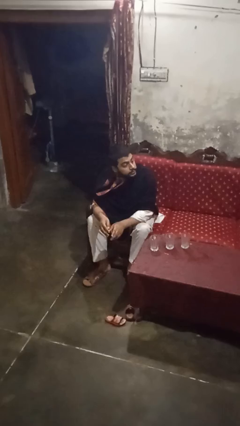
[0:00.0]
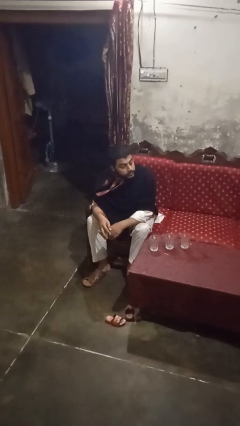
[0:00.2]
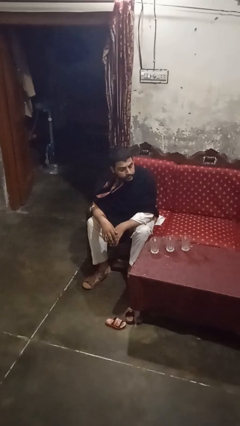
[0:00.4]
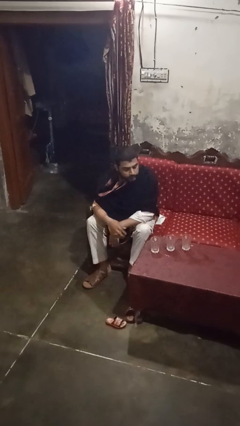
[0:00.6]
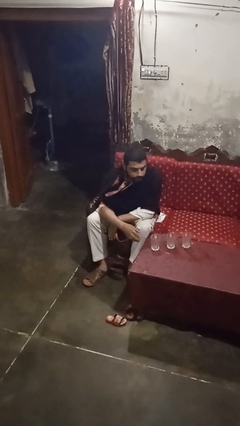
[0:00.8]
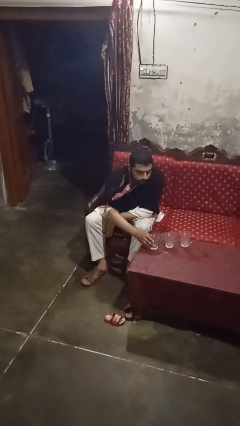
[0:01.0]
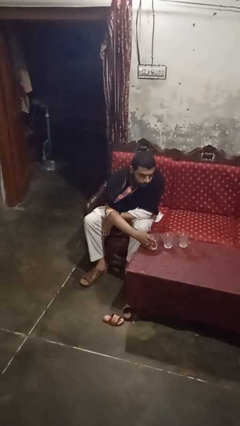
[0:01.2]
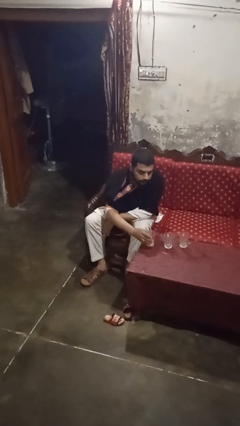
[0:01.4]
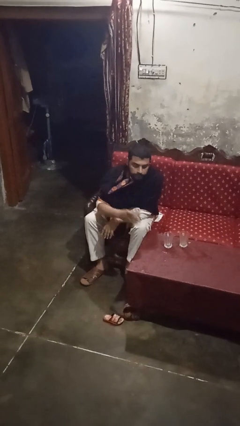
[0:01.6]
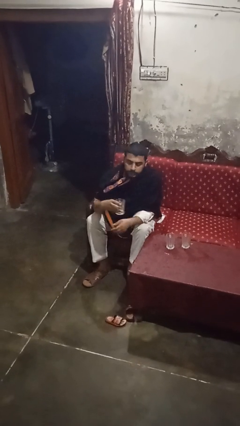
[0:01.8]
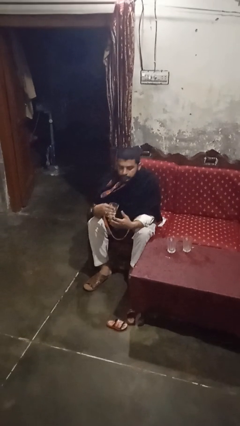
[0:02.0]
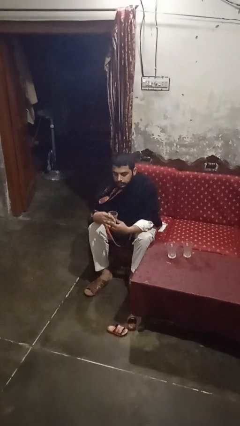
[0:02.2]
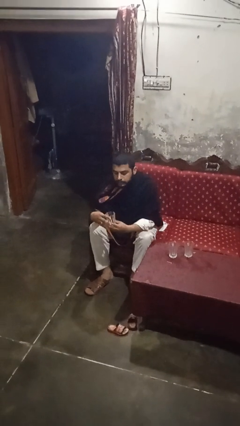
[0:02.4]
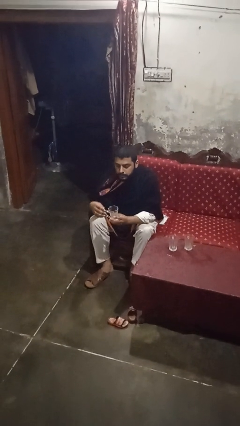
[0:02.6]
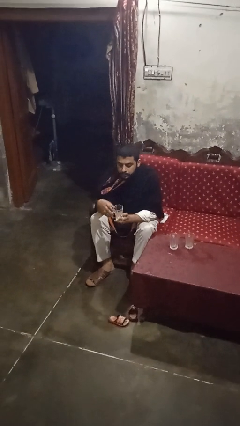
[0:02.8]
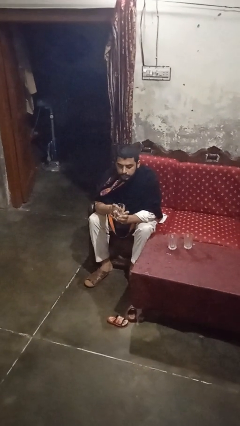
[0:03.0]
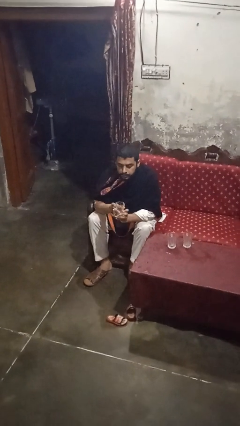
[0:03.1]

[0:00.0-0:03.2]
person picks up object from table

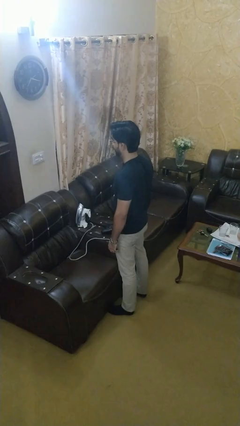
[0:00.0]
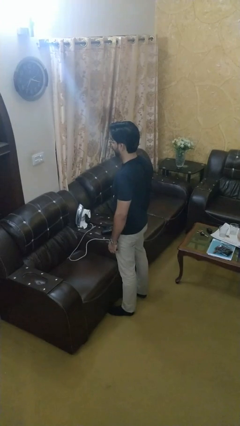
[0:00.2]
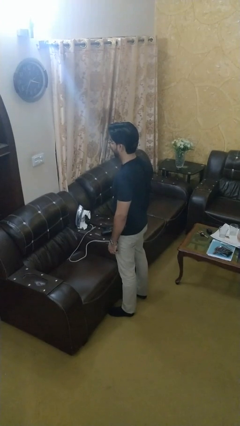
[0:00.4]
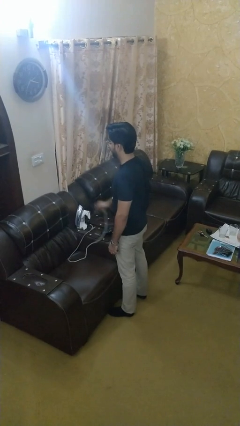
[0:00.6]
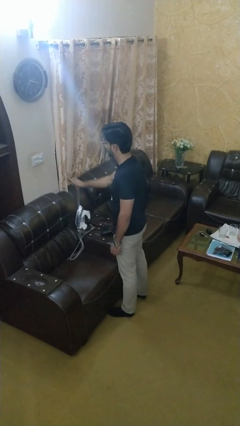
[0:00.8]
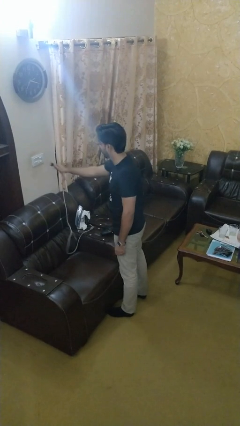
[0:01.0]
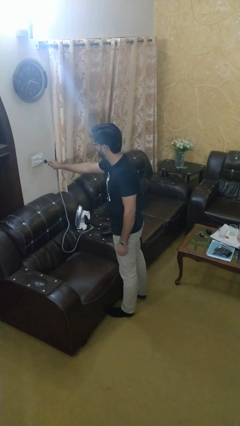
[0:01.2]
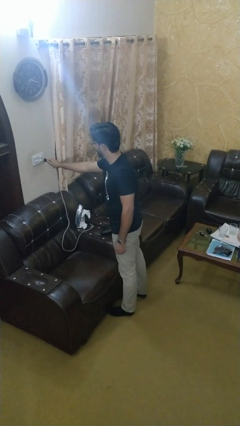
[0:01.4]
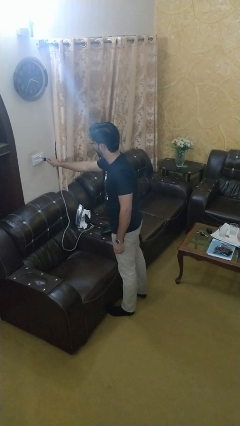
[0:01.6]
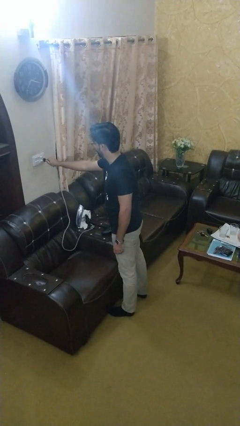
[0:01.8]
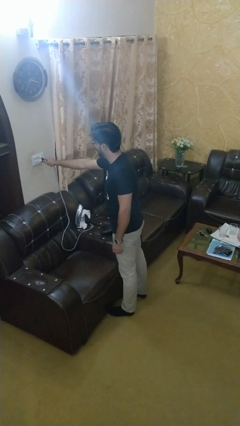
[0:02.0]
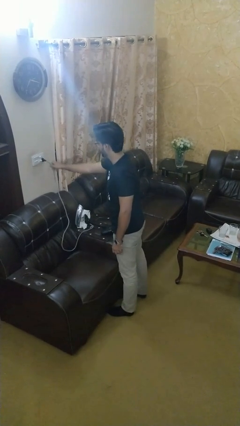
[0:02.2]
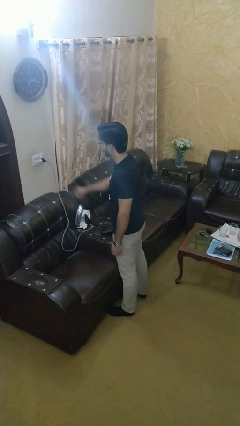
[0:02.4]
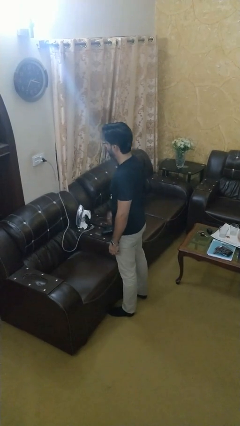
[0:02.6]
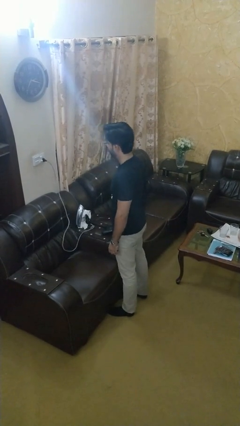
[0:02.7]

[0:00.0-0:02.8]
person plugs into electrical socket

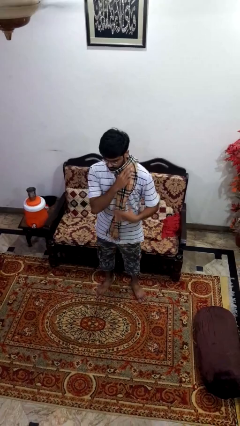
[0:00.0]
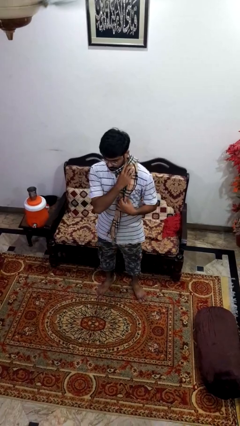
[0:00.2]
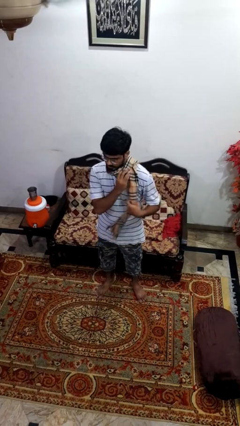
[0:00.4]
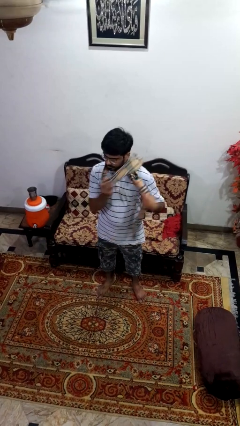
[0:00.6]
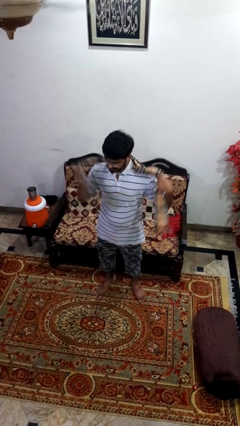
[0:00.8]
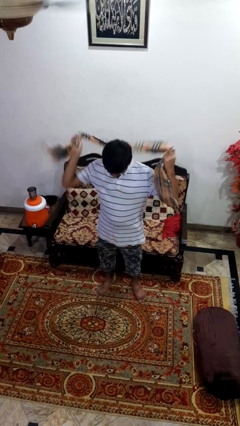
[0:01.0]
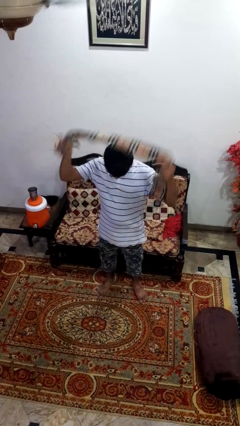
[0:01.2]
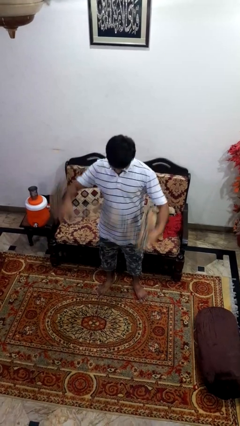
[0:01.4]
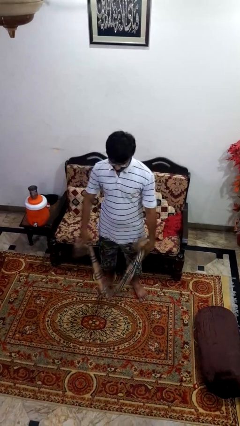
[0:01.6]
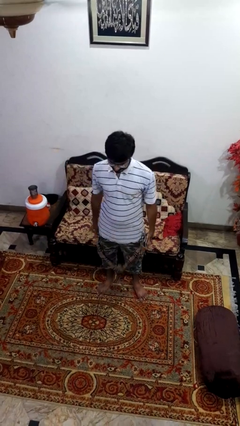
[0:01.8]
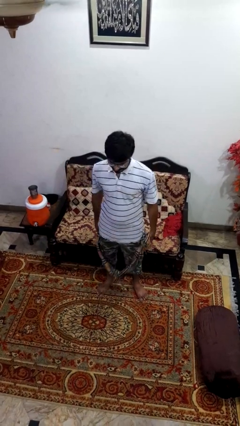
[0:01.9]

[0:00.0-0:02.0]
person takes off scarf

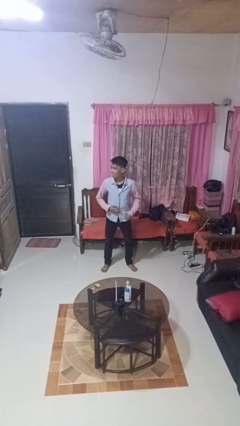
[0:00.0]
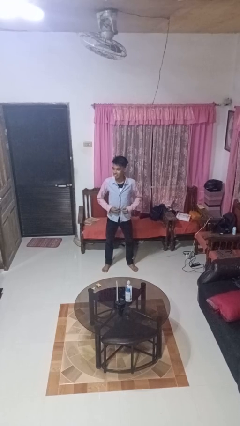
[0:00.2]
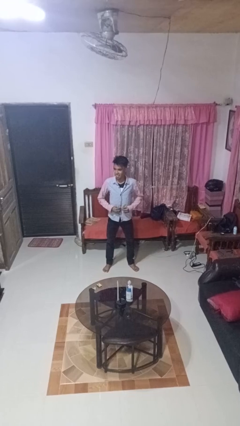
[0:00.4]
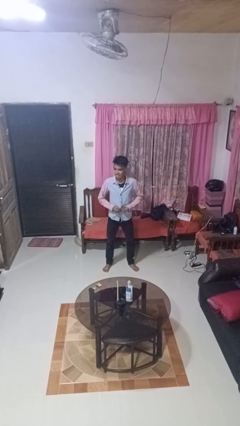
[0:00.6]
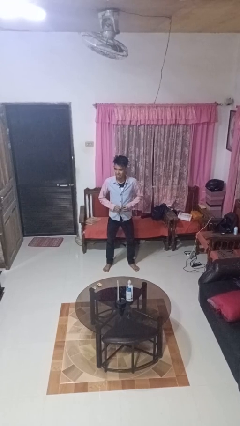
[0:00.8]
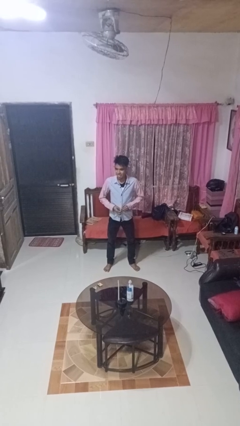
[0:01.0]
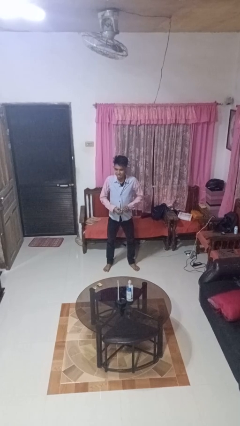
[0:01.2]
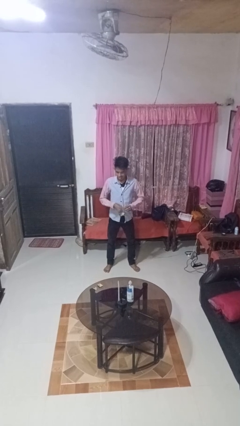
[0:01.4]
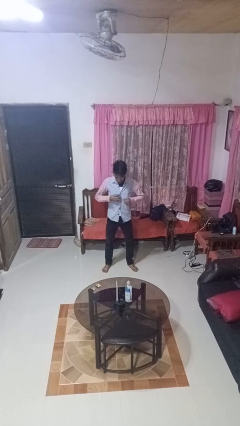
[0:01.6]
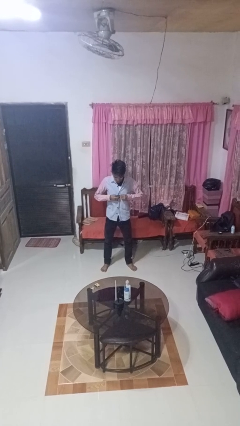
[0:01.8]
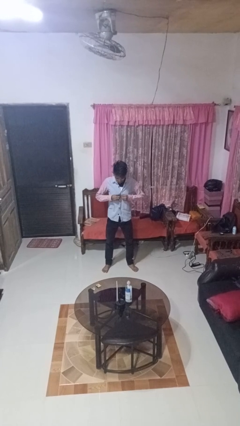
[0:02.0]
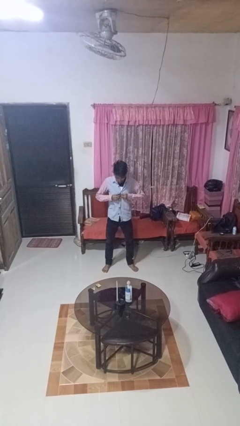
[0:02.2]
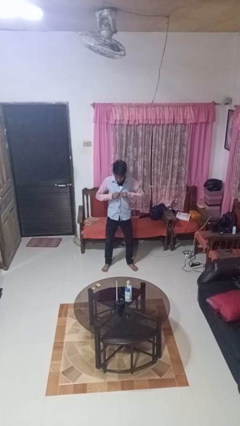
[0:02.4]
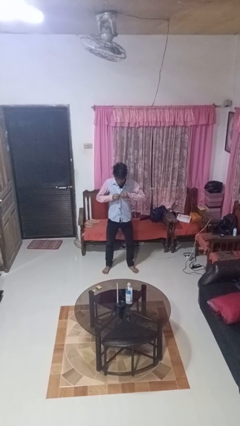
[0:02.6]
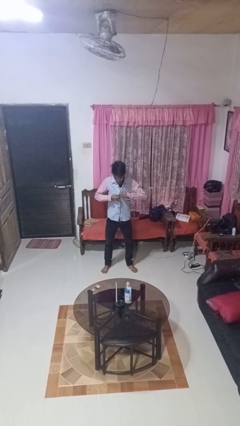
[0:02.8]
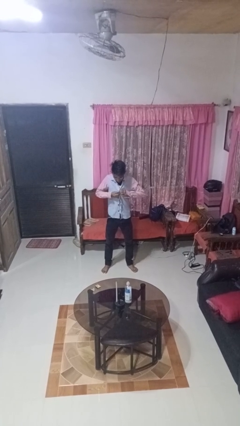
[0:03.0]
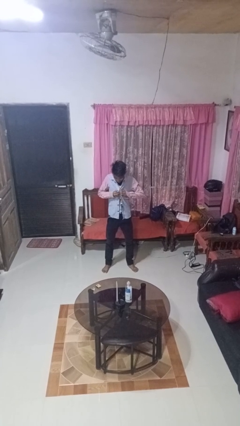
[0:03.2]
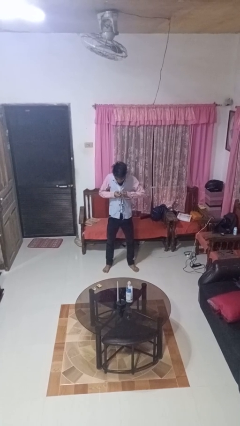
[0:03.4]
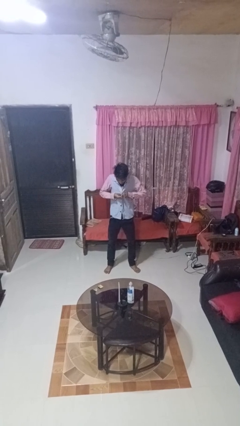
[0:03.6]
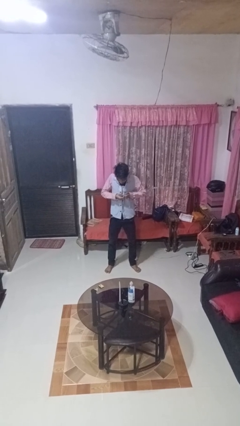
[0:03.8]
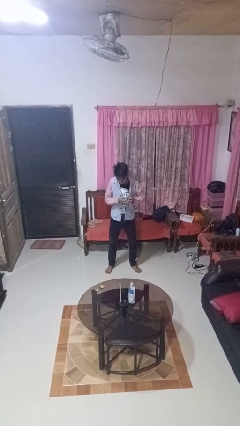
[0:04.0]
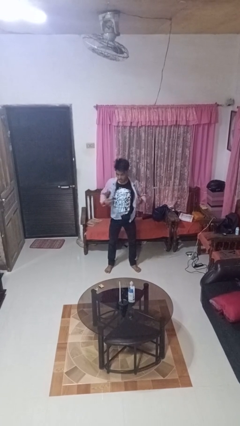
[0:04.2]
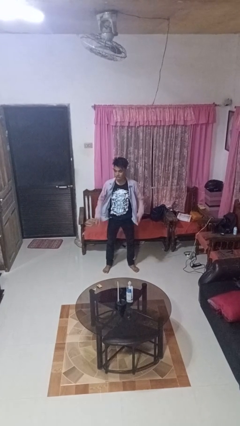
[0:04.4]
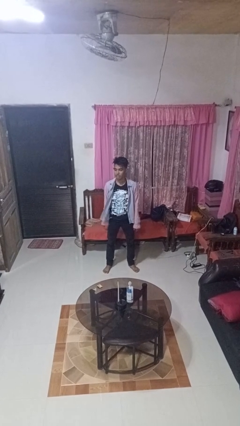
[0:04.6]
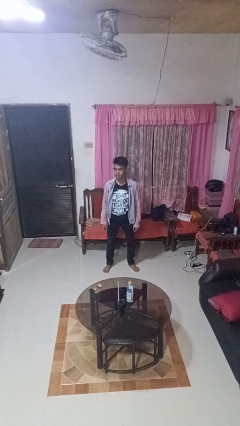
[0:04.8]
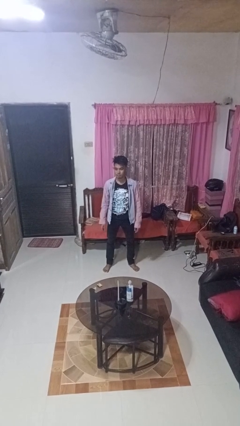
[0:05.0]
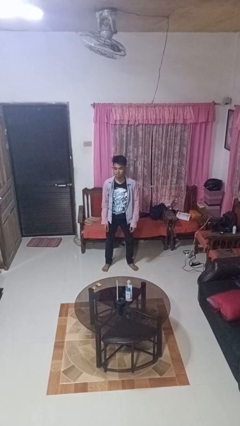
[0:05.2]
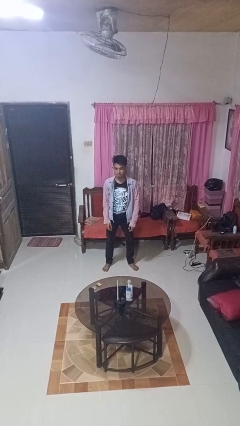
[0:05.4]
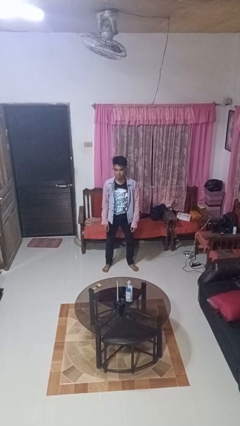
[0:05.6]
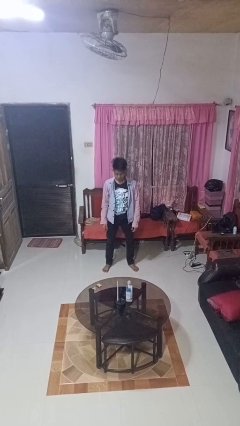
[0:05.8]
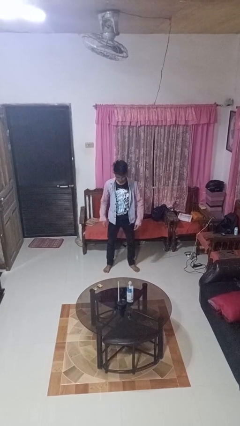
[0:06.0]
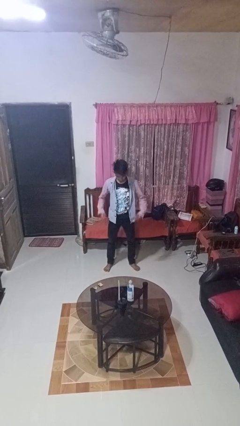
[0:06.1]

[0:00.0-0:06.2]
person unbuttons shirt

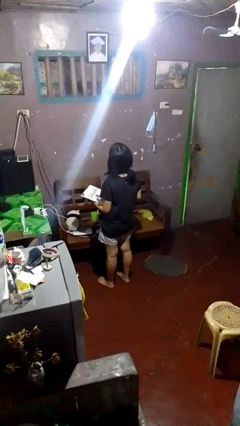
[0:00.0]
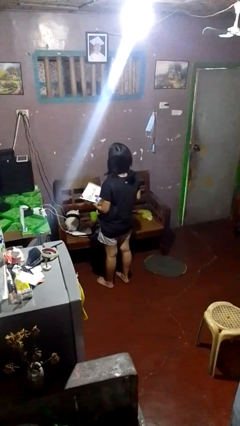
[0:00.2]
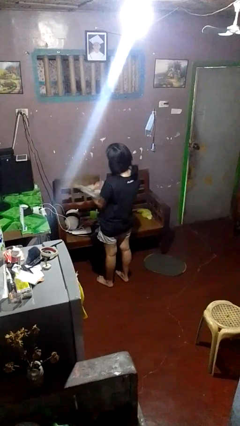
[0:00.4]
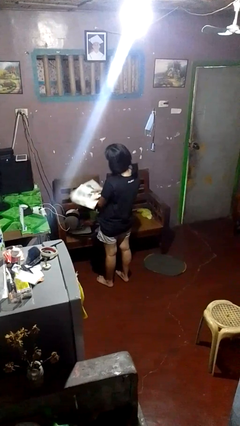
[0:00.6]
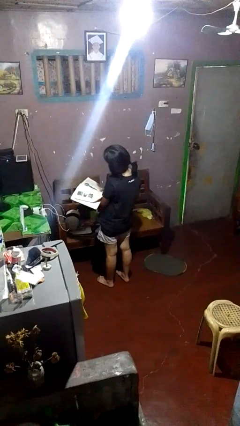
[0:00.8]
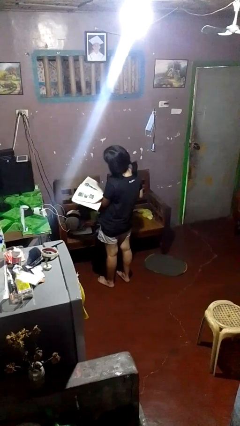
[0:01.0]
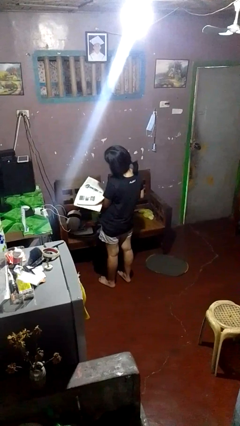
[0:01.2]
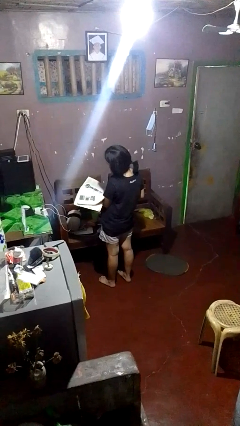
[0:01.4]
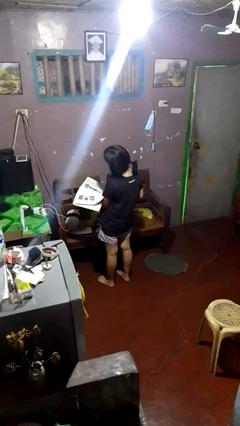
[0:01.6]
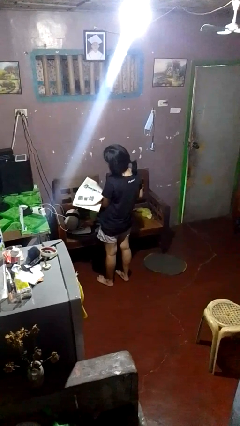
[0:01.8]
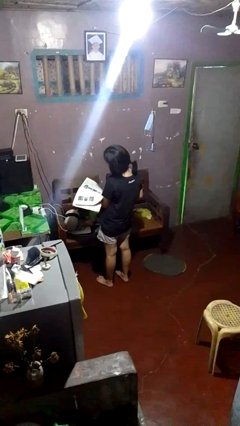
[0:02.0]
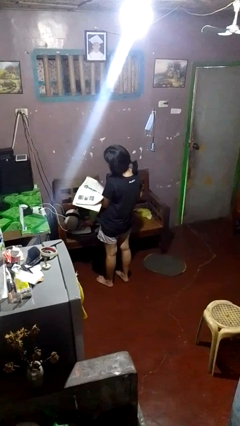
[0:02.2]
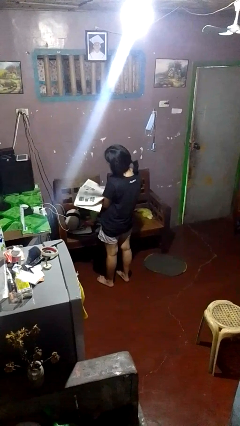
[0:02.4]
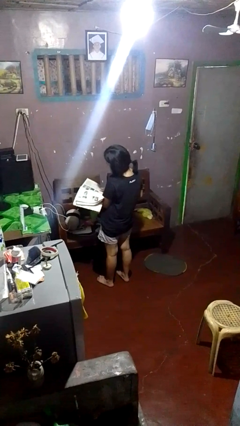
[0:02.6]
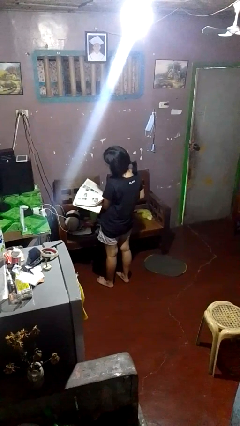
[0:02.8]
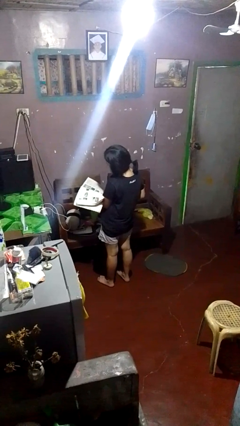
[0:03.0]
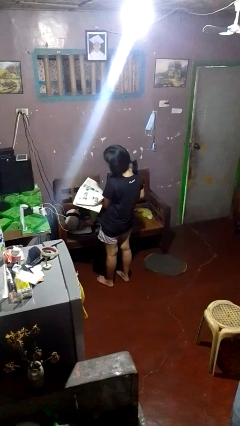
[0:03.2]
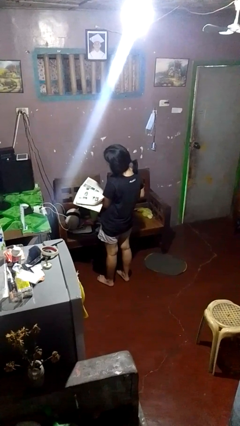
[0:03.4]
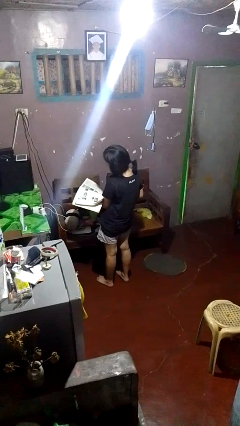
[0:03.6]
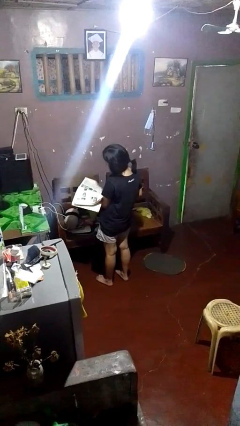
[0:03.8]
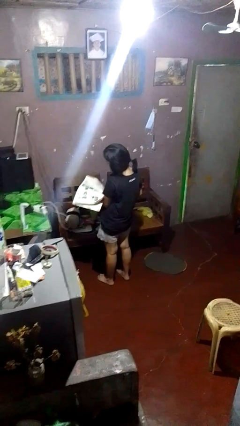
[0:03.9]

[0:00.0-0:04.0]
person reads book
